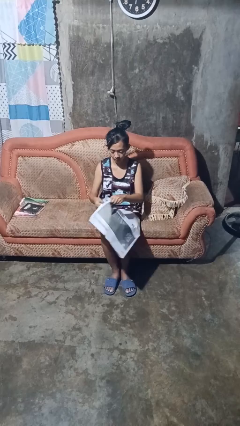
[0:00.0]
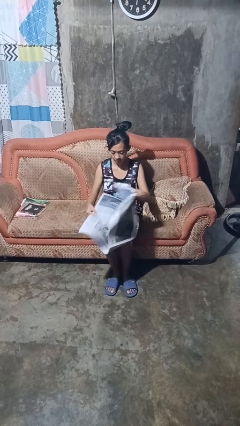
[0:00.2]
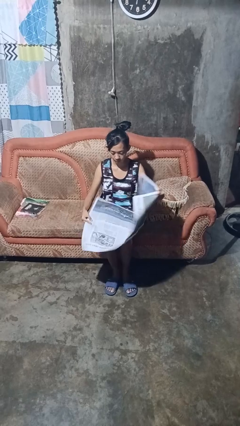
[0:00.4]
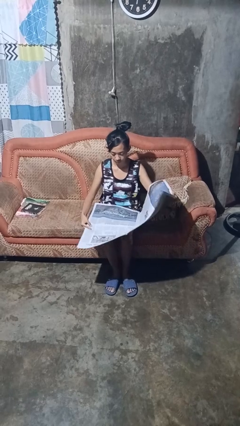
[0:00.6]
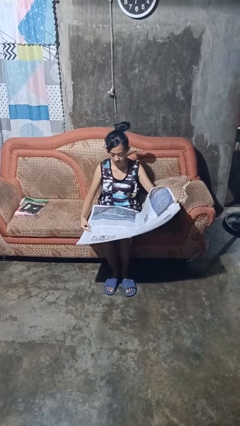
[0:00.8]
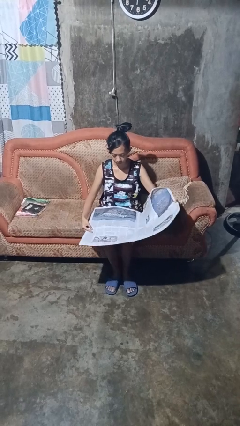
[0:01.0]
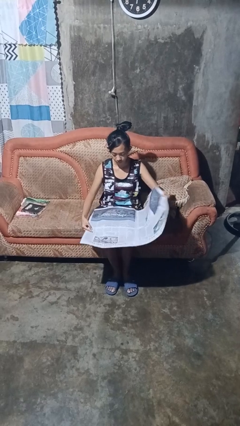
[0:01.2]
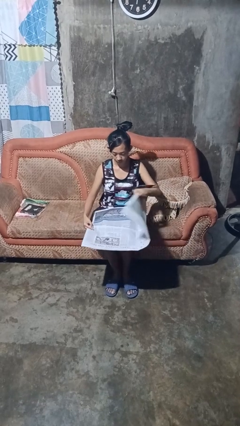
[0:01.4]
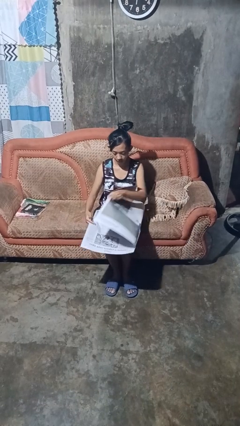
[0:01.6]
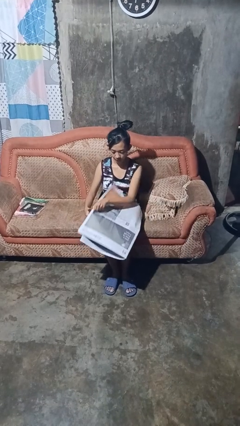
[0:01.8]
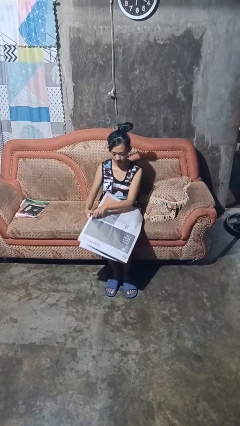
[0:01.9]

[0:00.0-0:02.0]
person reads newspaper

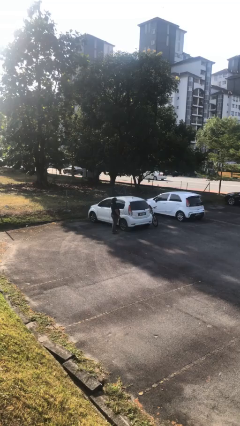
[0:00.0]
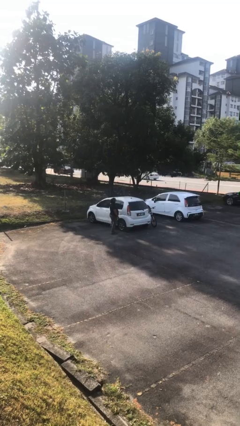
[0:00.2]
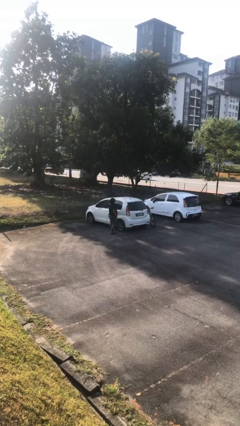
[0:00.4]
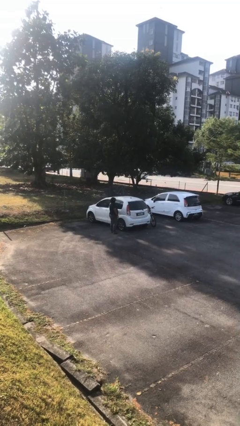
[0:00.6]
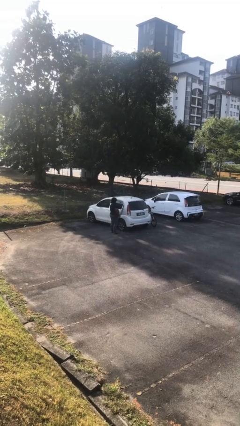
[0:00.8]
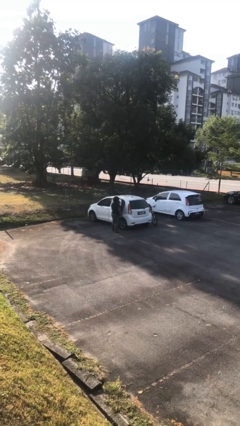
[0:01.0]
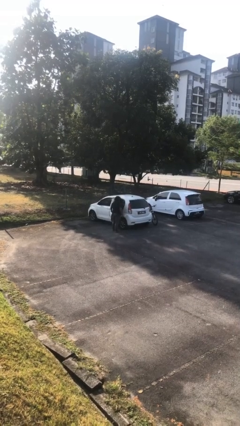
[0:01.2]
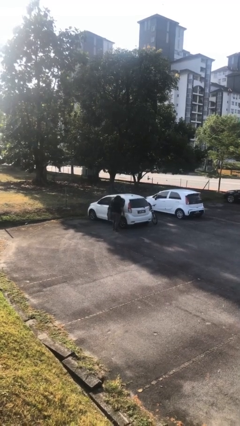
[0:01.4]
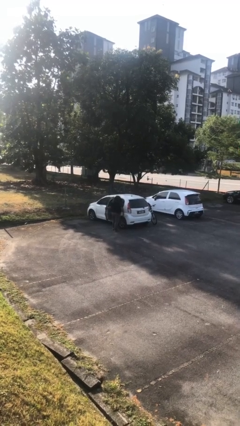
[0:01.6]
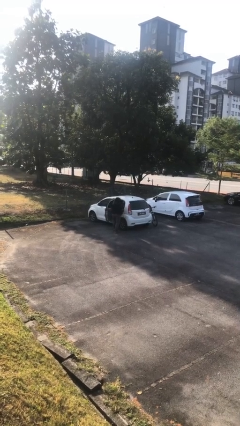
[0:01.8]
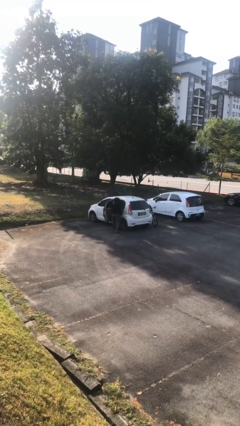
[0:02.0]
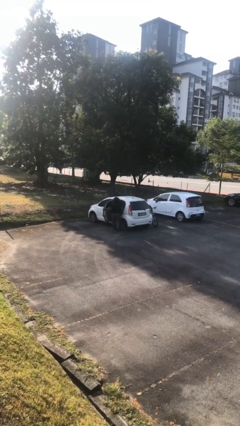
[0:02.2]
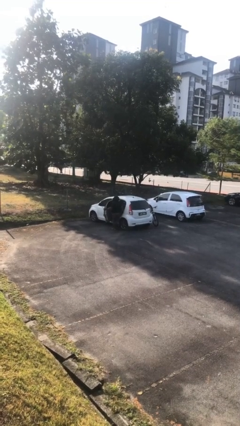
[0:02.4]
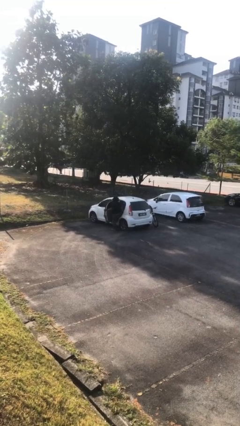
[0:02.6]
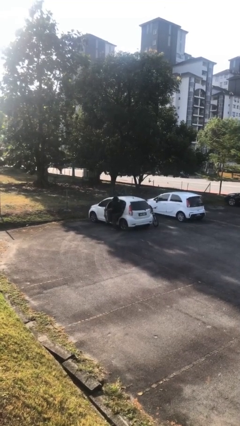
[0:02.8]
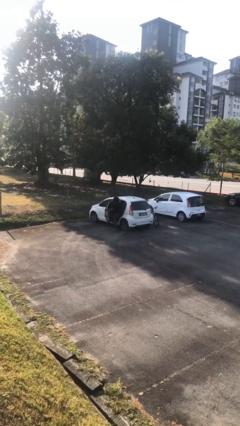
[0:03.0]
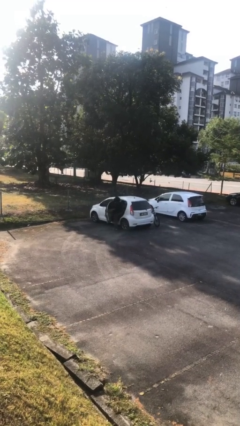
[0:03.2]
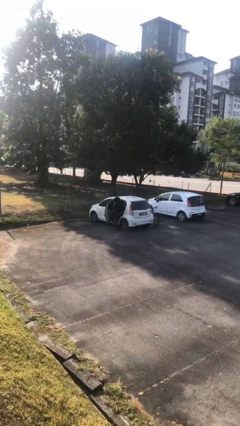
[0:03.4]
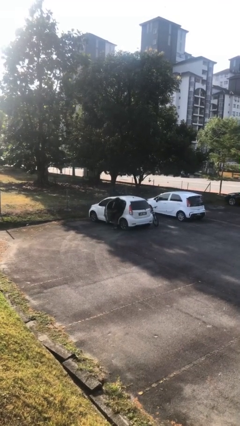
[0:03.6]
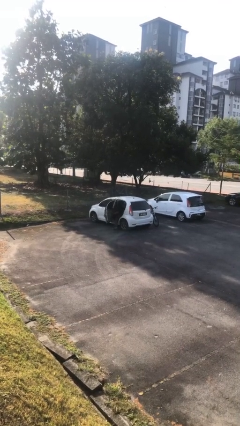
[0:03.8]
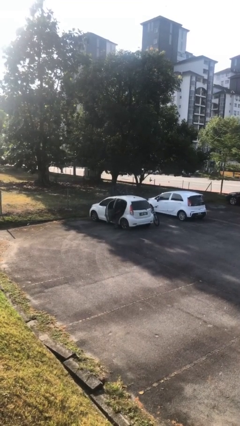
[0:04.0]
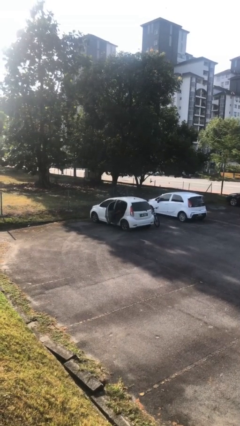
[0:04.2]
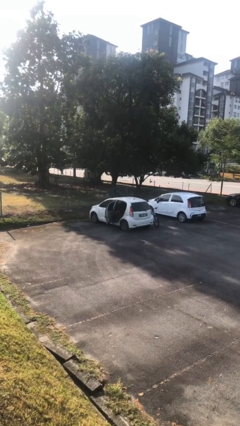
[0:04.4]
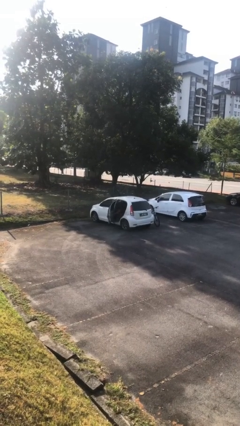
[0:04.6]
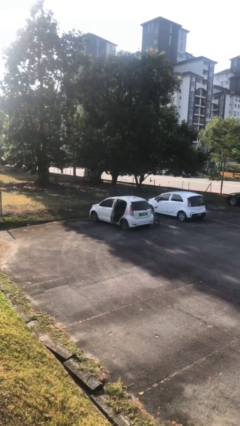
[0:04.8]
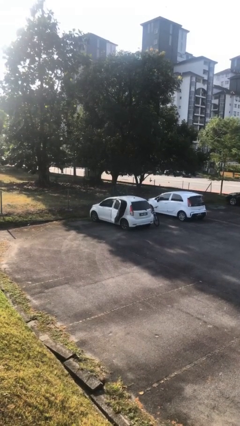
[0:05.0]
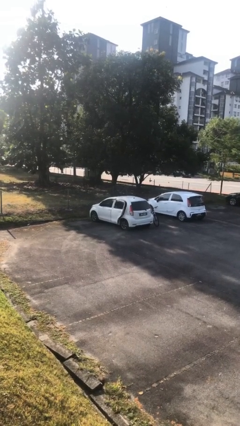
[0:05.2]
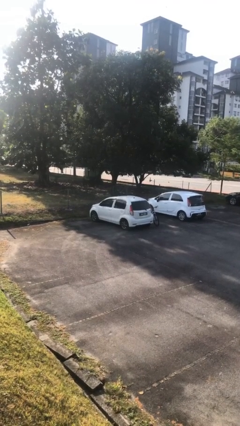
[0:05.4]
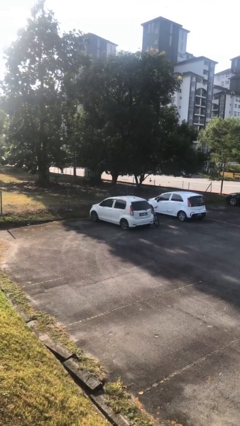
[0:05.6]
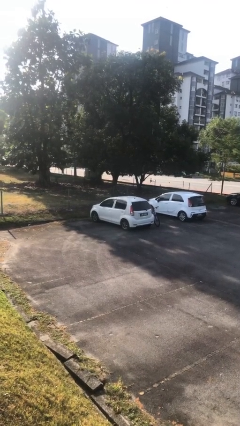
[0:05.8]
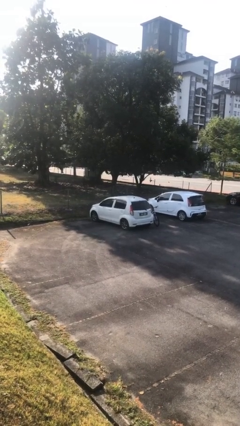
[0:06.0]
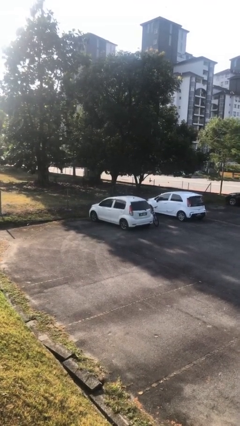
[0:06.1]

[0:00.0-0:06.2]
car picks up person

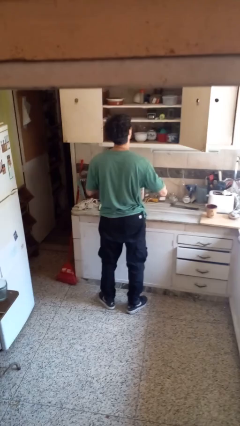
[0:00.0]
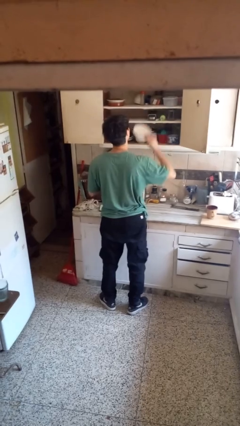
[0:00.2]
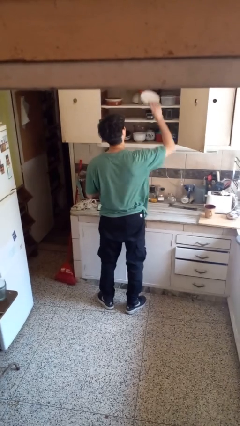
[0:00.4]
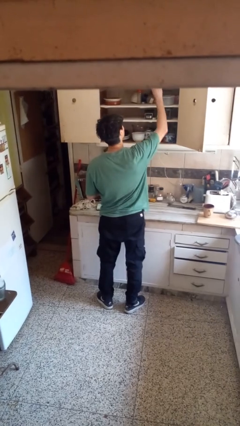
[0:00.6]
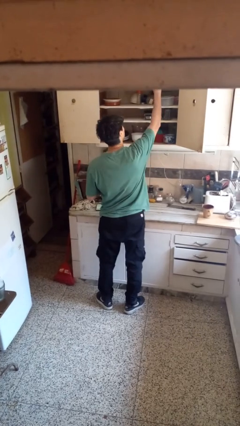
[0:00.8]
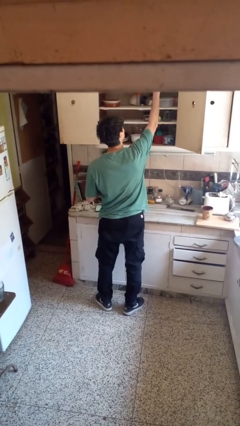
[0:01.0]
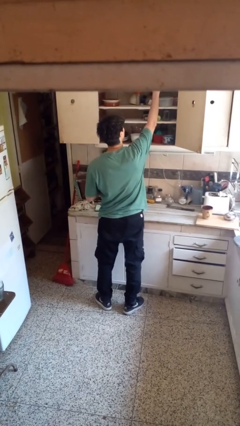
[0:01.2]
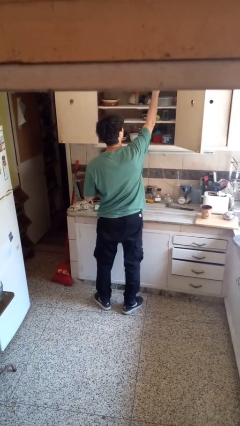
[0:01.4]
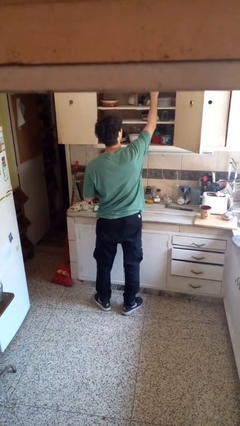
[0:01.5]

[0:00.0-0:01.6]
person puts object in cabinet

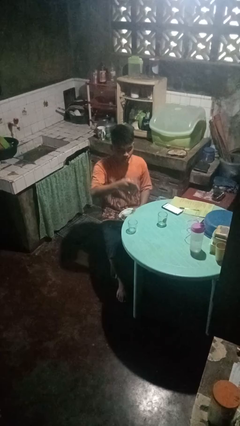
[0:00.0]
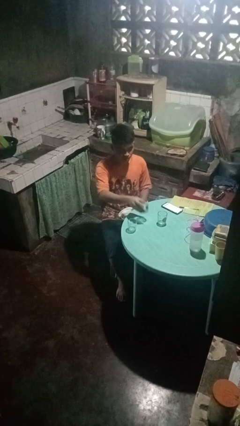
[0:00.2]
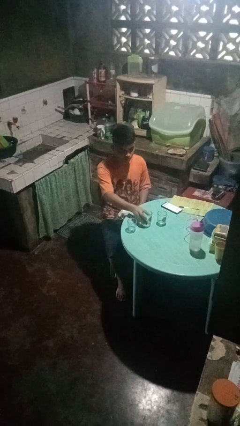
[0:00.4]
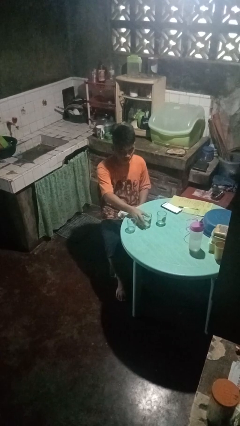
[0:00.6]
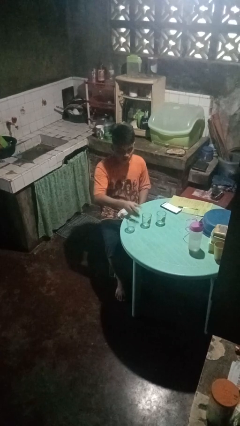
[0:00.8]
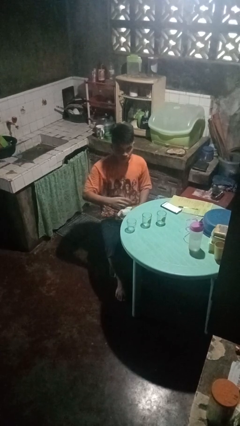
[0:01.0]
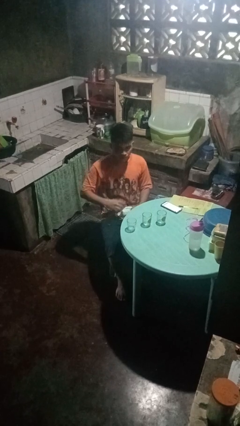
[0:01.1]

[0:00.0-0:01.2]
person puts down object on table

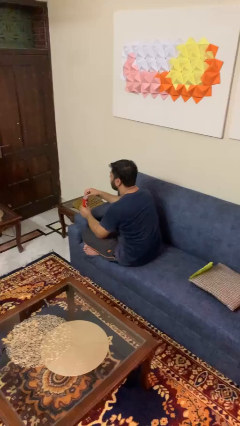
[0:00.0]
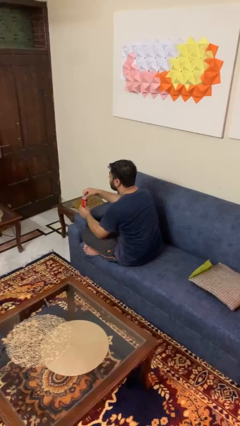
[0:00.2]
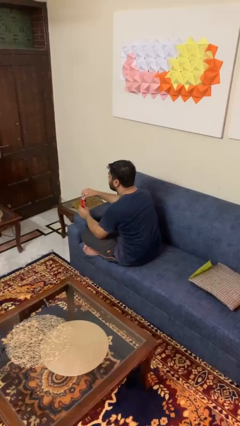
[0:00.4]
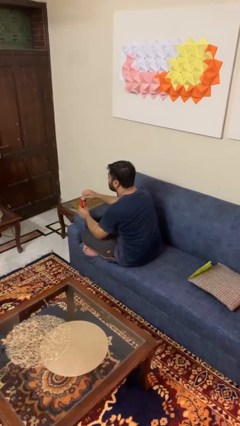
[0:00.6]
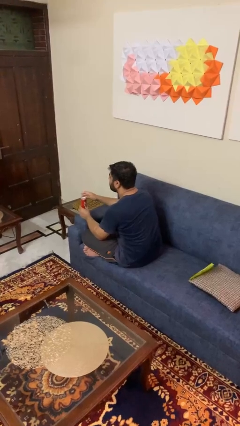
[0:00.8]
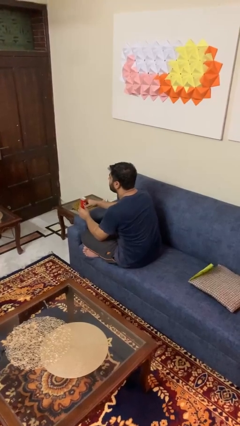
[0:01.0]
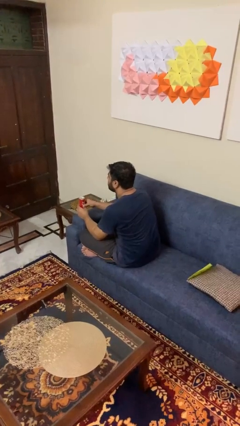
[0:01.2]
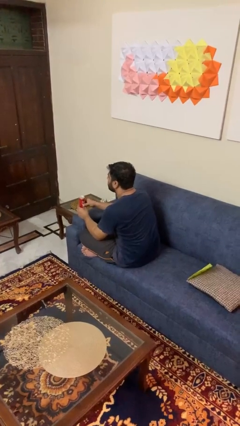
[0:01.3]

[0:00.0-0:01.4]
person opens beverage can

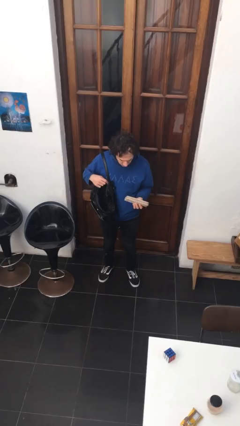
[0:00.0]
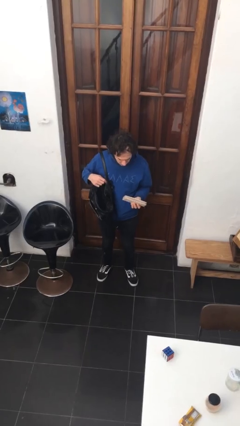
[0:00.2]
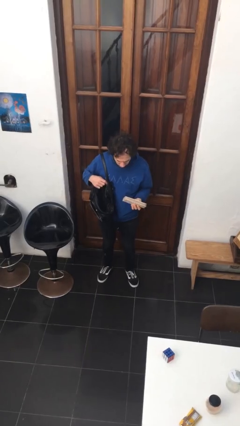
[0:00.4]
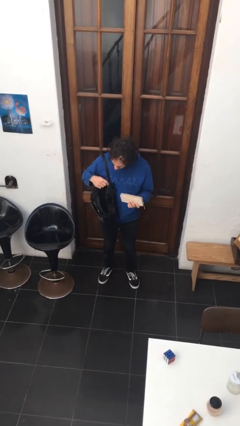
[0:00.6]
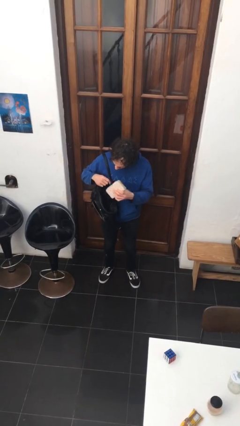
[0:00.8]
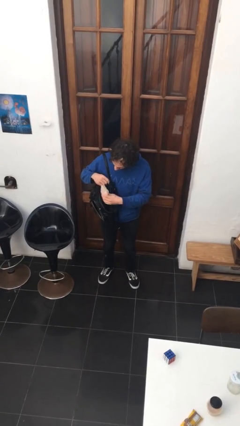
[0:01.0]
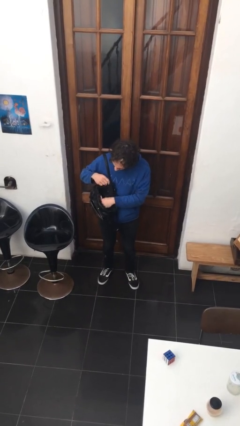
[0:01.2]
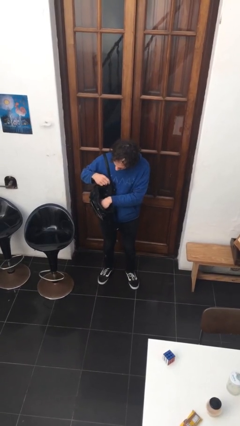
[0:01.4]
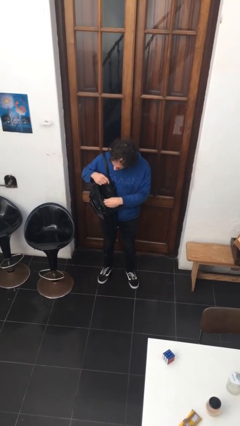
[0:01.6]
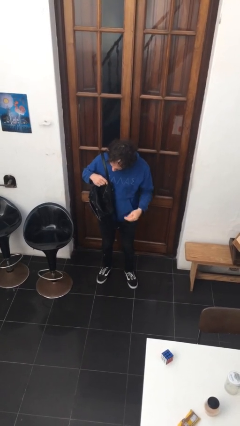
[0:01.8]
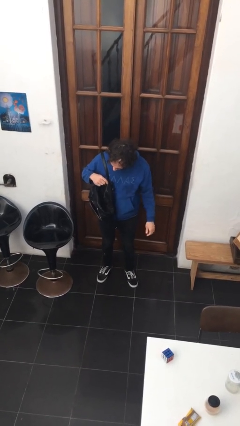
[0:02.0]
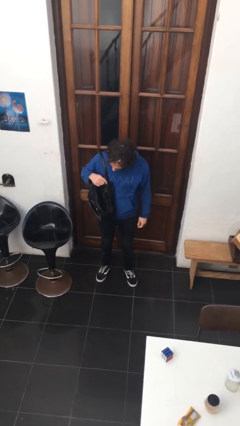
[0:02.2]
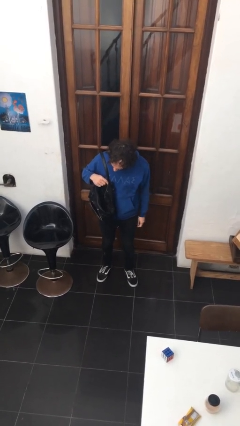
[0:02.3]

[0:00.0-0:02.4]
person puts object into purse

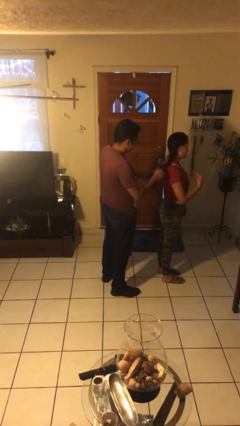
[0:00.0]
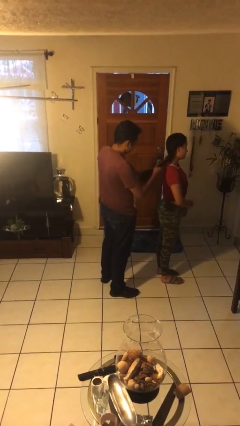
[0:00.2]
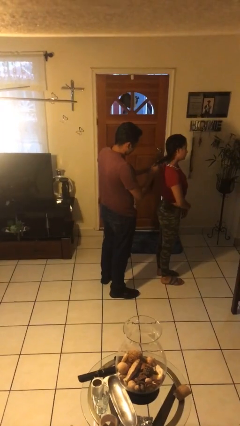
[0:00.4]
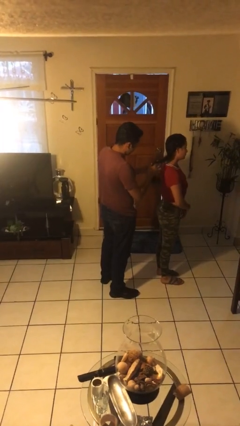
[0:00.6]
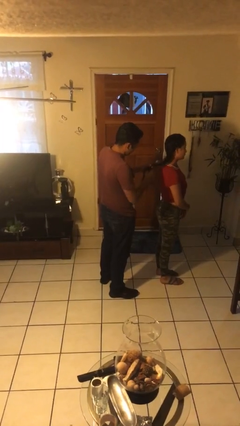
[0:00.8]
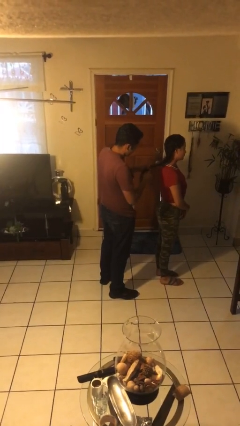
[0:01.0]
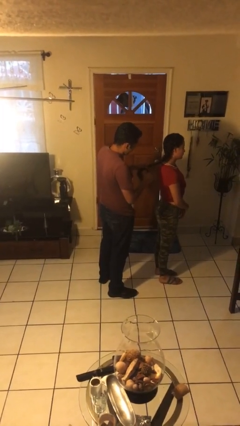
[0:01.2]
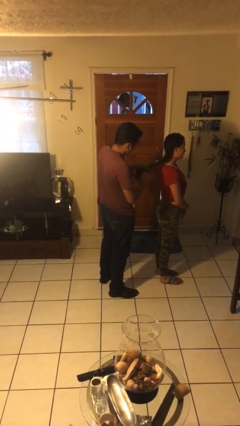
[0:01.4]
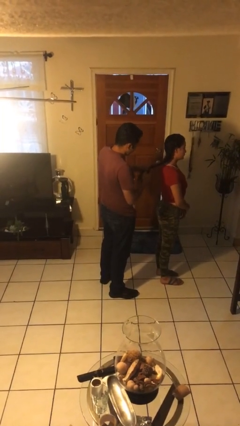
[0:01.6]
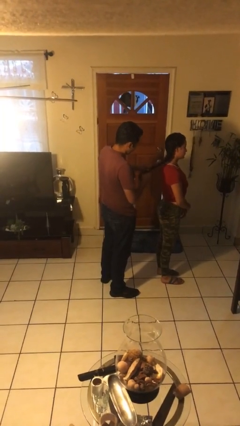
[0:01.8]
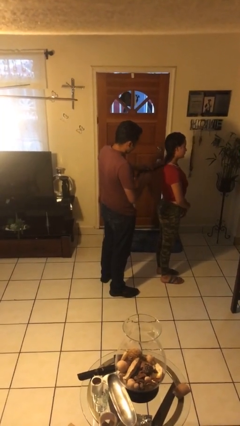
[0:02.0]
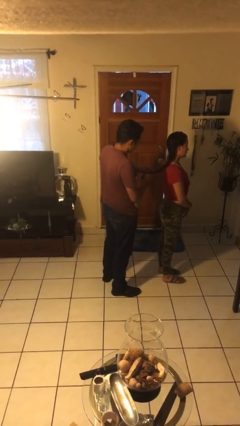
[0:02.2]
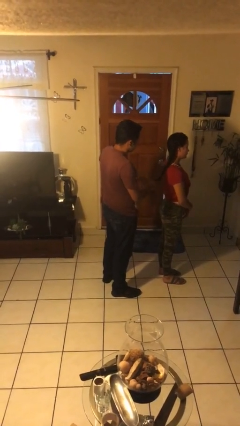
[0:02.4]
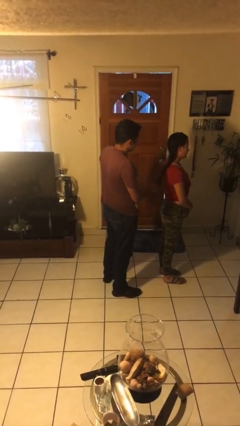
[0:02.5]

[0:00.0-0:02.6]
person braids hair of person
